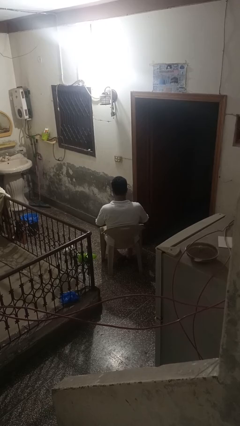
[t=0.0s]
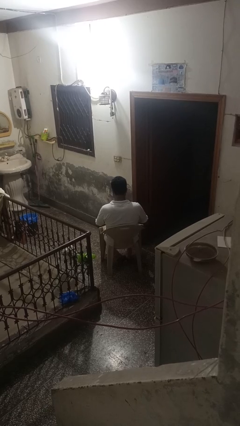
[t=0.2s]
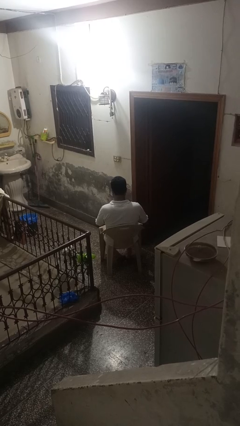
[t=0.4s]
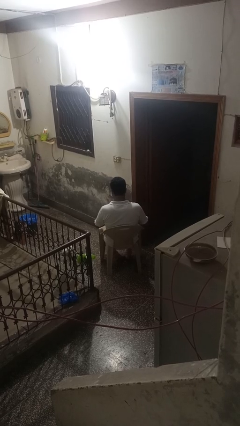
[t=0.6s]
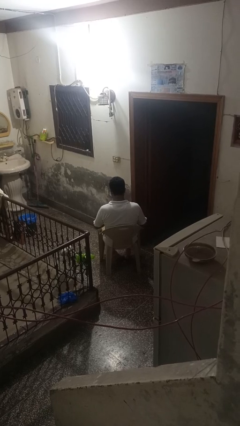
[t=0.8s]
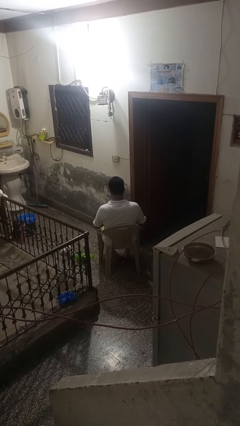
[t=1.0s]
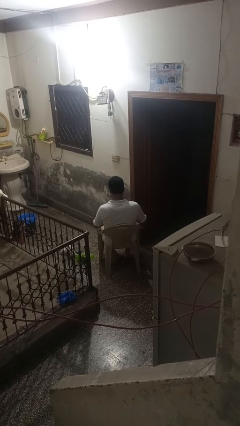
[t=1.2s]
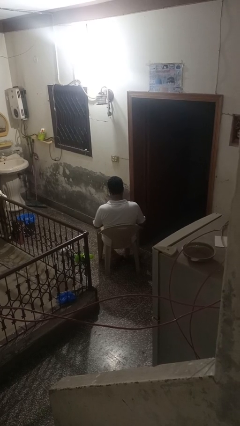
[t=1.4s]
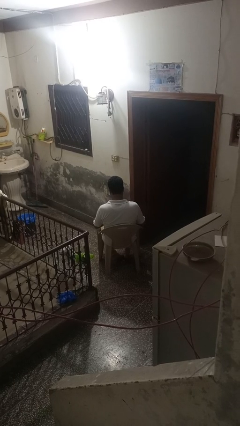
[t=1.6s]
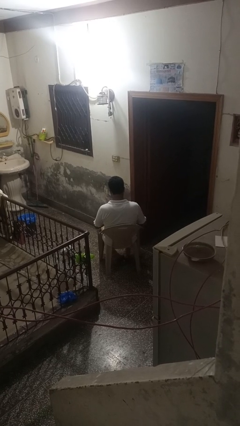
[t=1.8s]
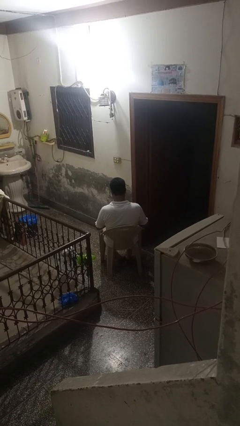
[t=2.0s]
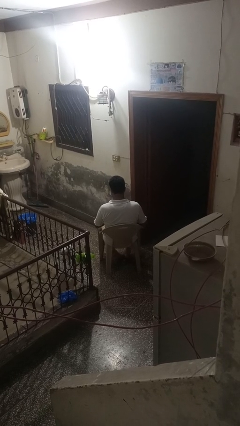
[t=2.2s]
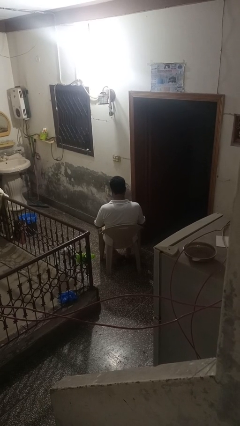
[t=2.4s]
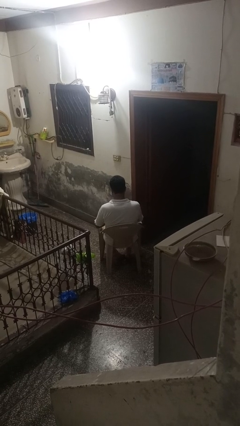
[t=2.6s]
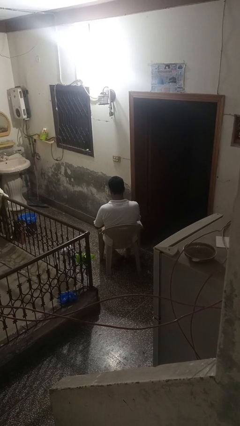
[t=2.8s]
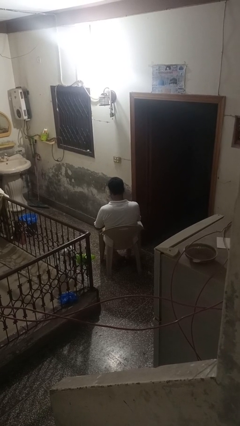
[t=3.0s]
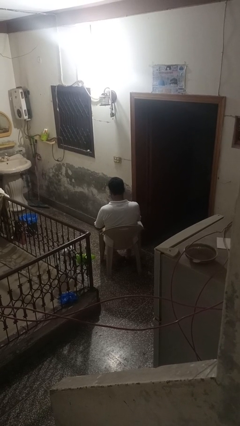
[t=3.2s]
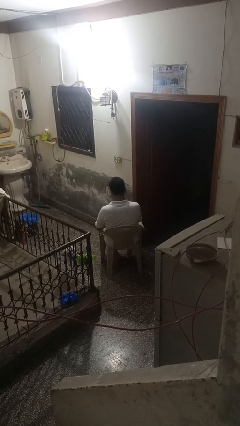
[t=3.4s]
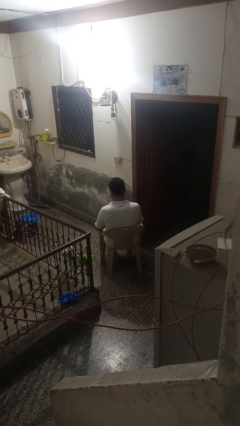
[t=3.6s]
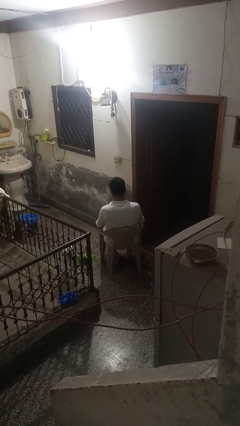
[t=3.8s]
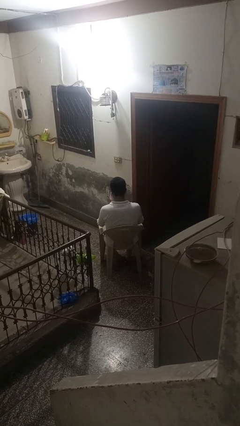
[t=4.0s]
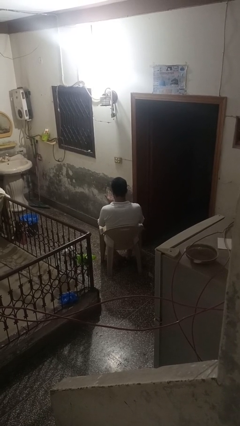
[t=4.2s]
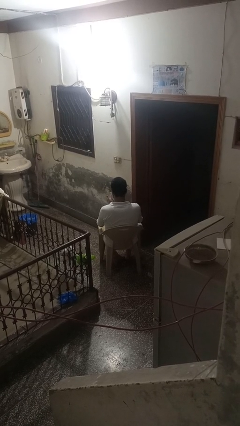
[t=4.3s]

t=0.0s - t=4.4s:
person dries hands with towel

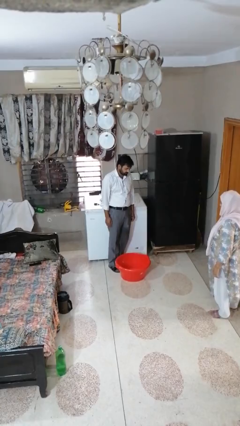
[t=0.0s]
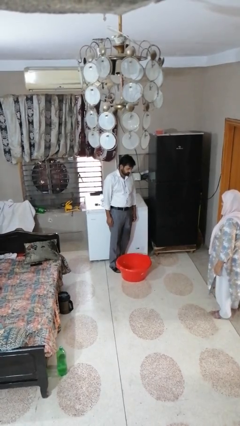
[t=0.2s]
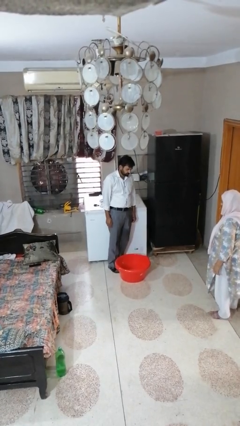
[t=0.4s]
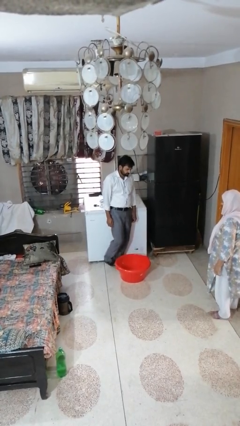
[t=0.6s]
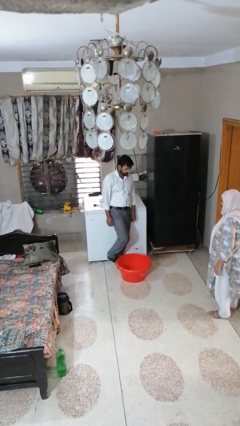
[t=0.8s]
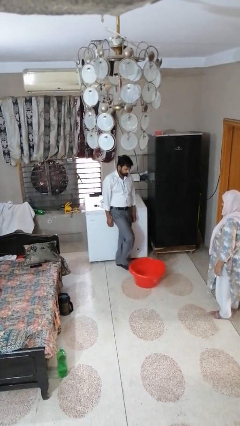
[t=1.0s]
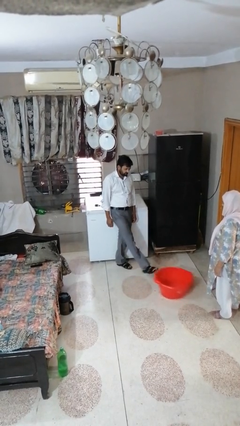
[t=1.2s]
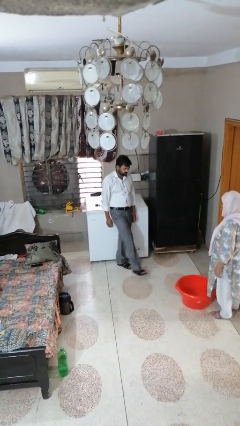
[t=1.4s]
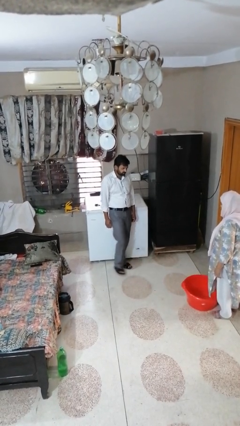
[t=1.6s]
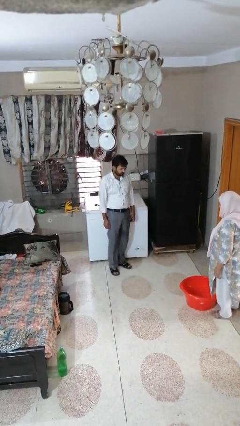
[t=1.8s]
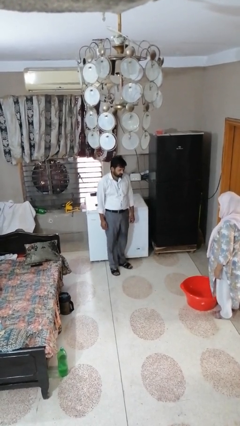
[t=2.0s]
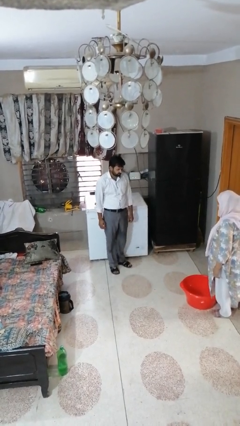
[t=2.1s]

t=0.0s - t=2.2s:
person kicks object to person

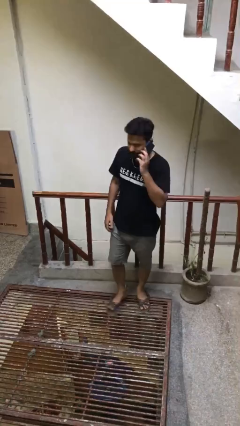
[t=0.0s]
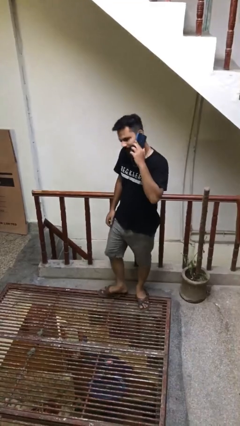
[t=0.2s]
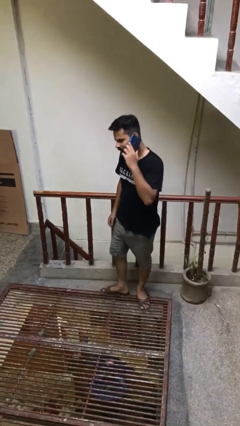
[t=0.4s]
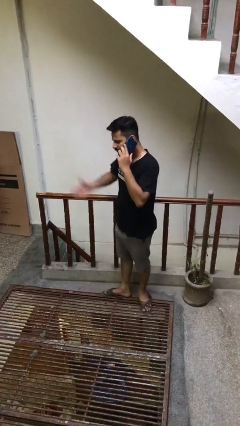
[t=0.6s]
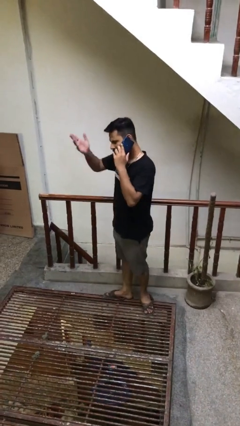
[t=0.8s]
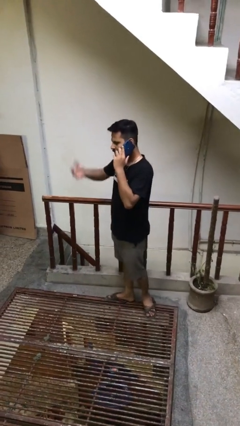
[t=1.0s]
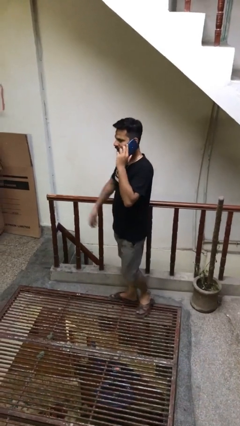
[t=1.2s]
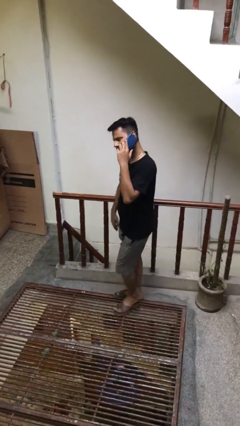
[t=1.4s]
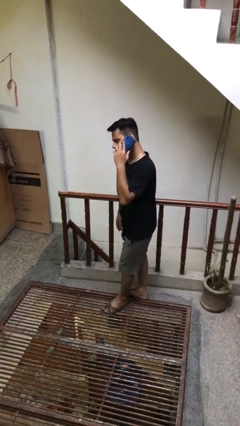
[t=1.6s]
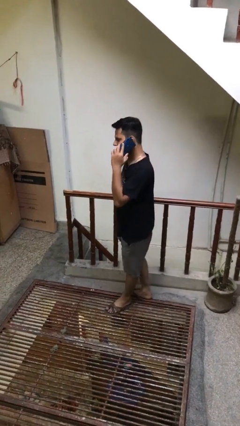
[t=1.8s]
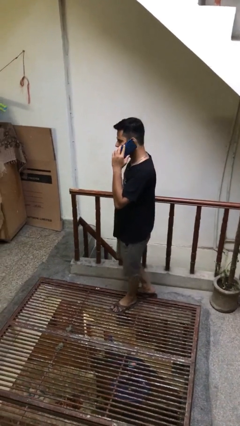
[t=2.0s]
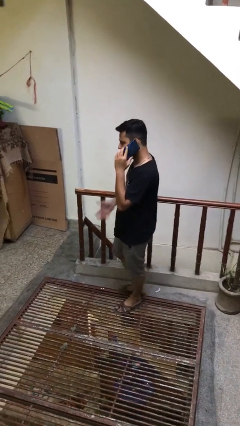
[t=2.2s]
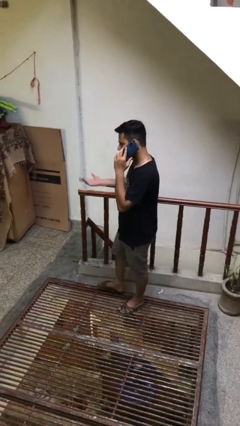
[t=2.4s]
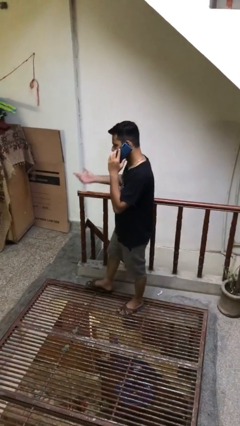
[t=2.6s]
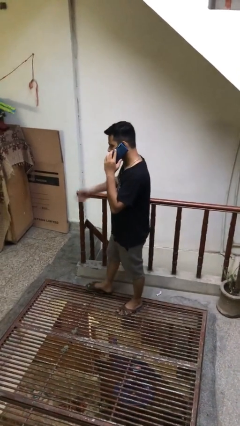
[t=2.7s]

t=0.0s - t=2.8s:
person talks on phone

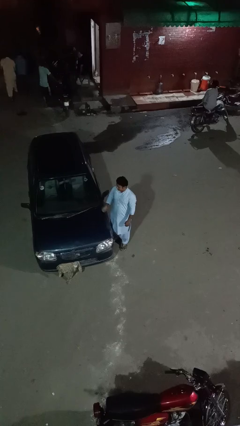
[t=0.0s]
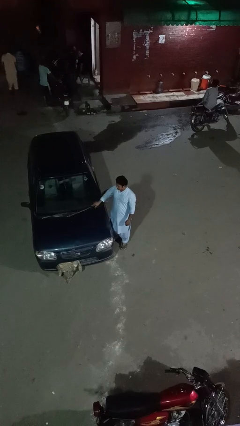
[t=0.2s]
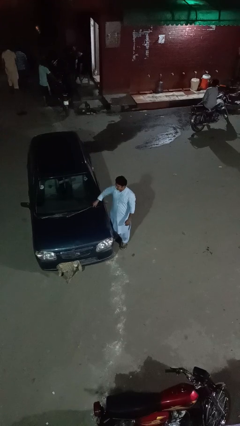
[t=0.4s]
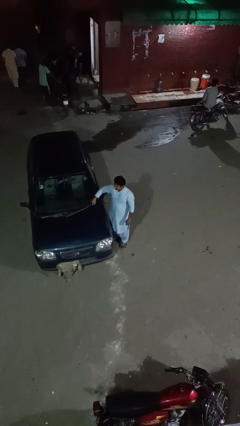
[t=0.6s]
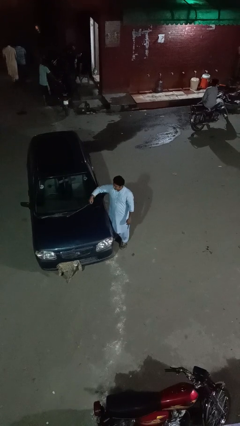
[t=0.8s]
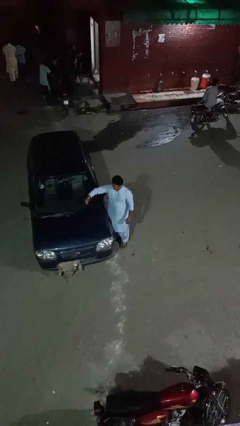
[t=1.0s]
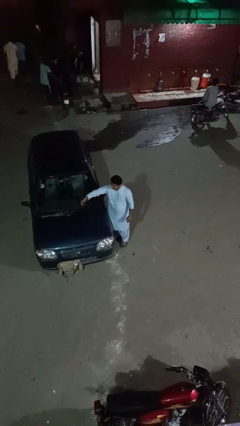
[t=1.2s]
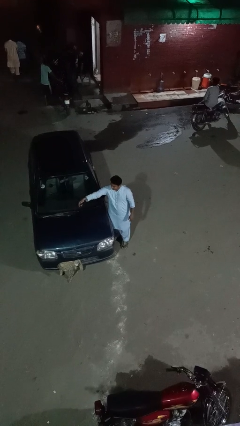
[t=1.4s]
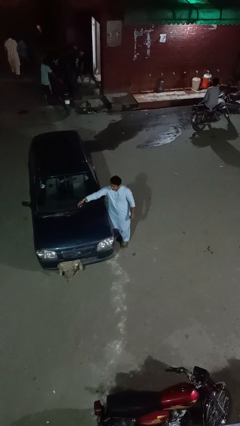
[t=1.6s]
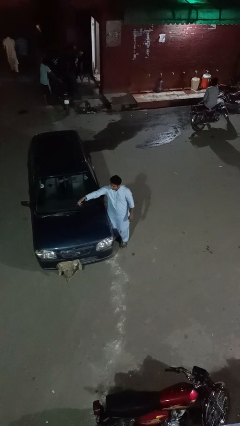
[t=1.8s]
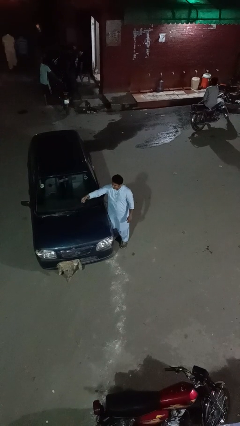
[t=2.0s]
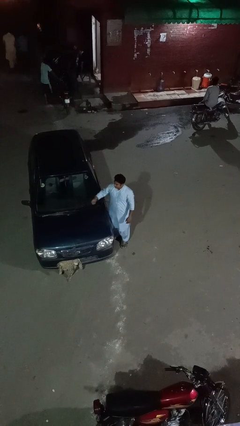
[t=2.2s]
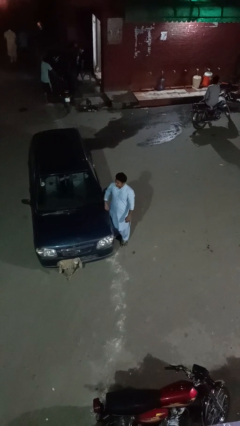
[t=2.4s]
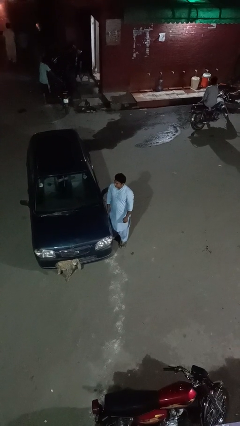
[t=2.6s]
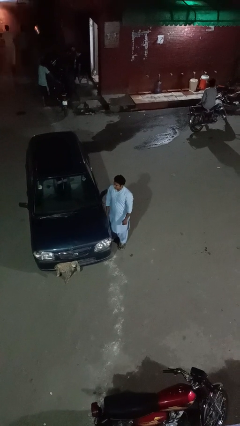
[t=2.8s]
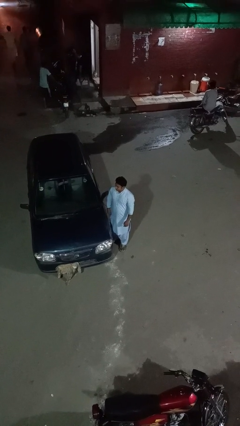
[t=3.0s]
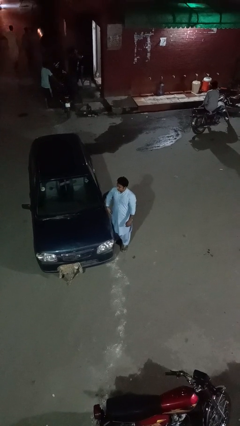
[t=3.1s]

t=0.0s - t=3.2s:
person flips up car wipers

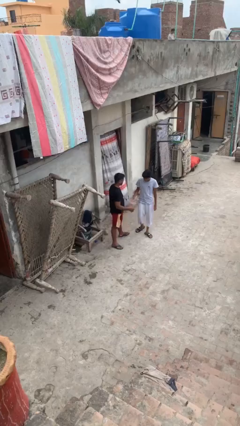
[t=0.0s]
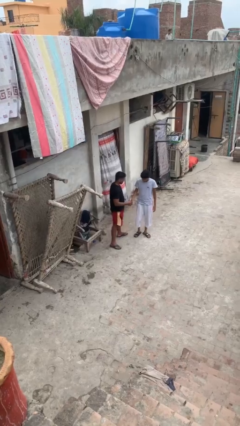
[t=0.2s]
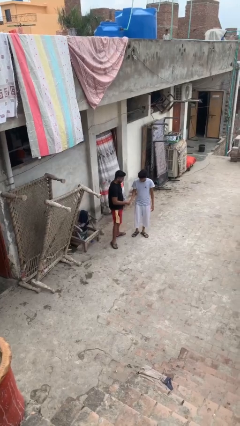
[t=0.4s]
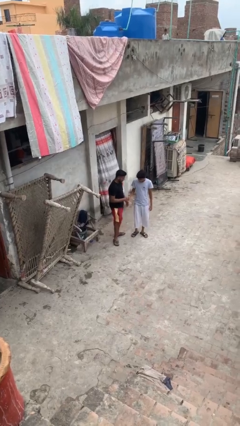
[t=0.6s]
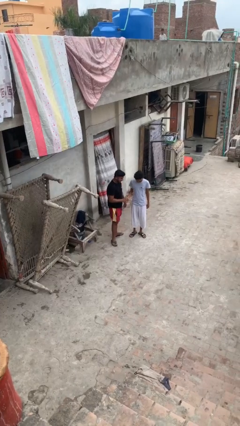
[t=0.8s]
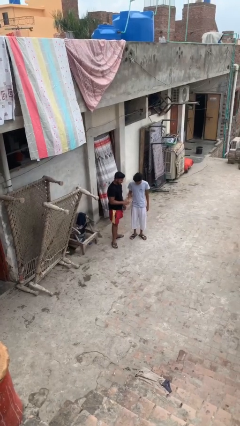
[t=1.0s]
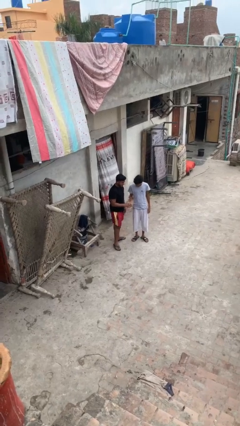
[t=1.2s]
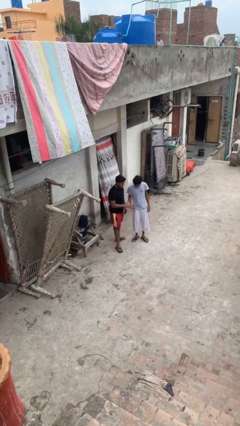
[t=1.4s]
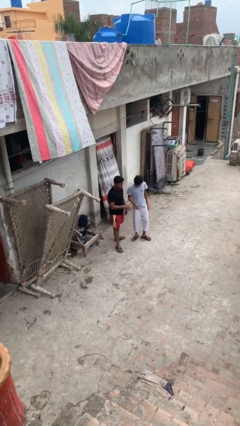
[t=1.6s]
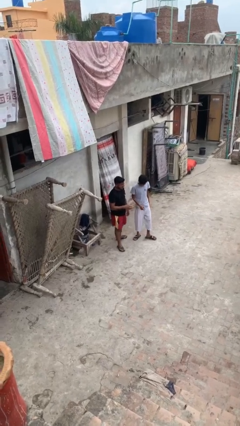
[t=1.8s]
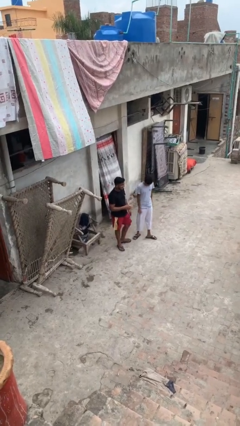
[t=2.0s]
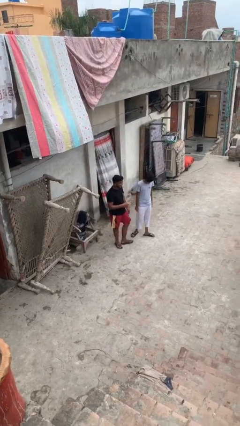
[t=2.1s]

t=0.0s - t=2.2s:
person shakes hand

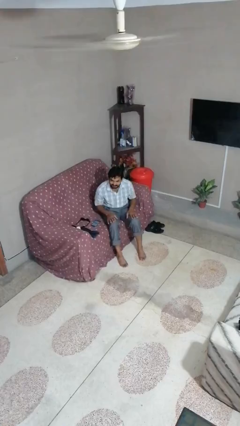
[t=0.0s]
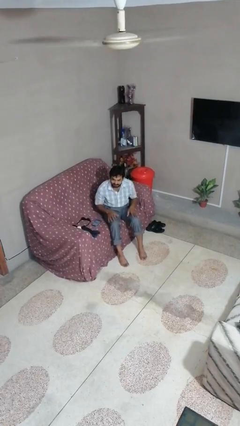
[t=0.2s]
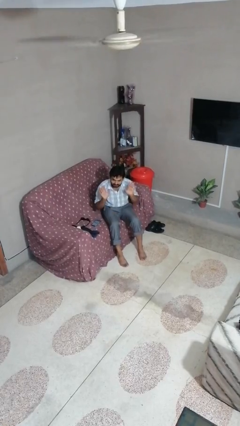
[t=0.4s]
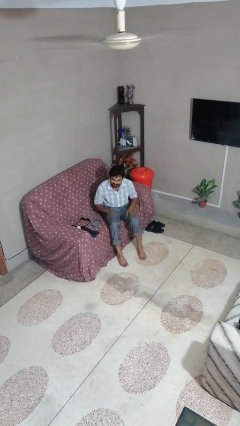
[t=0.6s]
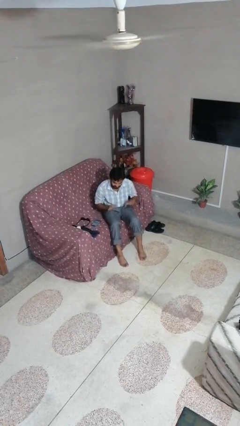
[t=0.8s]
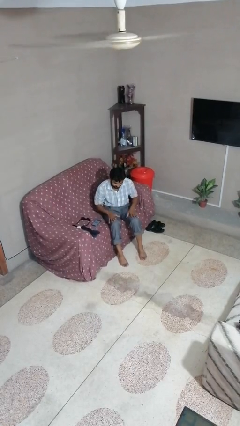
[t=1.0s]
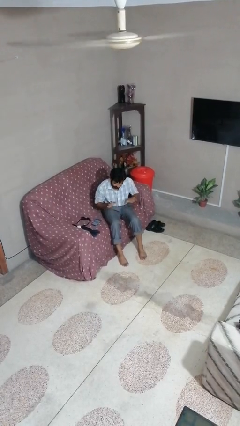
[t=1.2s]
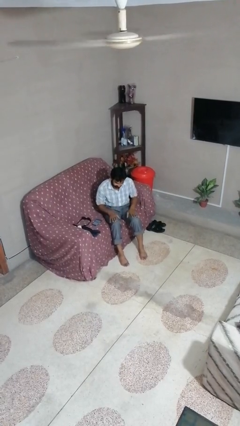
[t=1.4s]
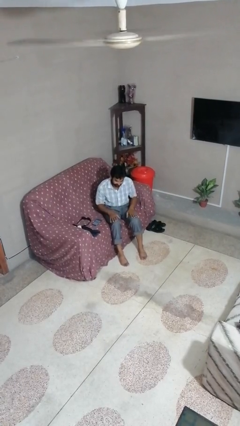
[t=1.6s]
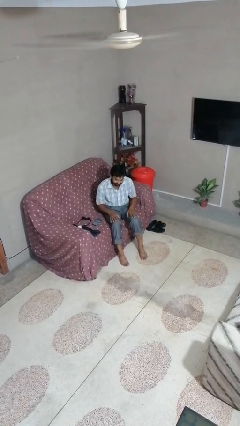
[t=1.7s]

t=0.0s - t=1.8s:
person slaps hands on thighs

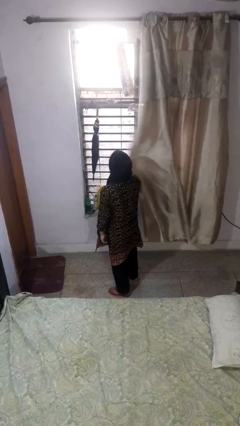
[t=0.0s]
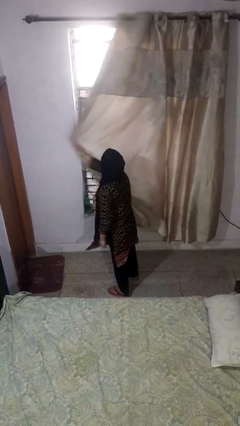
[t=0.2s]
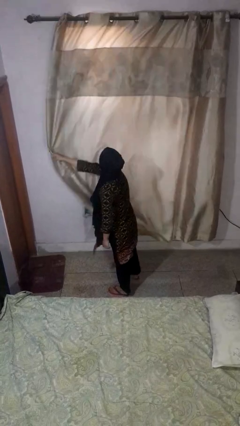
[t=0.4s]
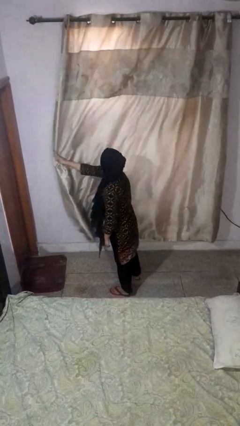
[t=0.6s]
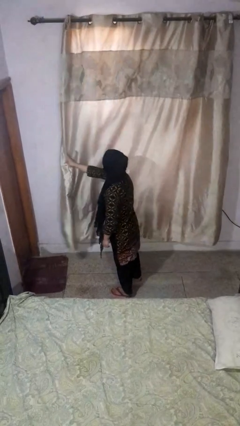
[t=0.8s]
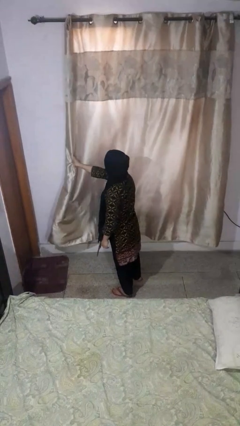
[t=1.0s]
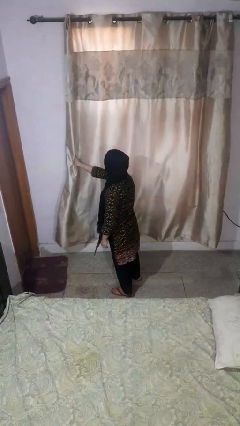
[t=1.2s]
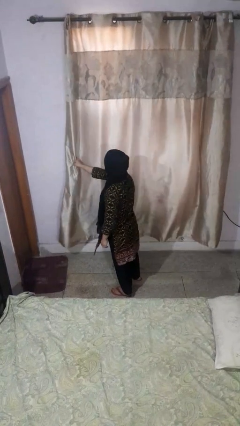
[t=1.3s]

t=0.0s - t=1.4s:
person closes curtains
